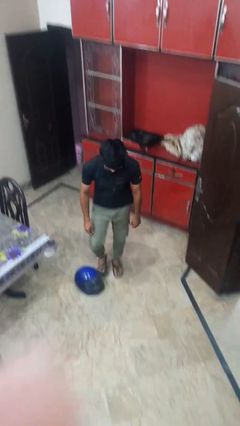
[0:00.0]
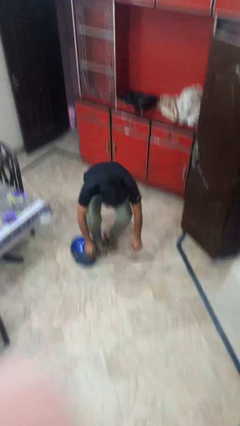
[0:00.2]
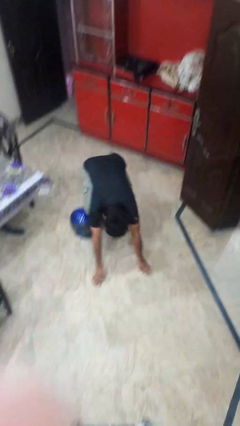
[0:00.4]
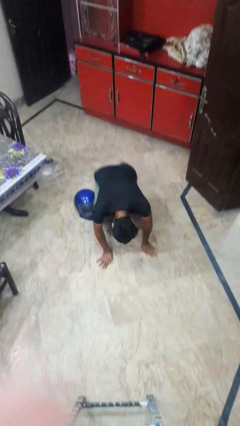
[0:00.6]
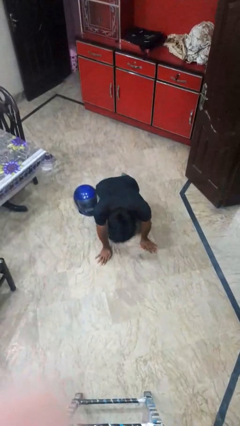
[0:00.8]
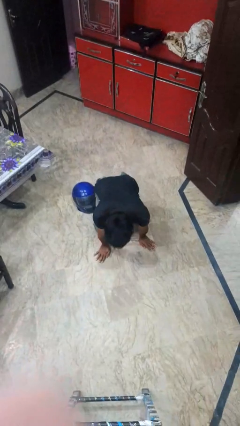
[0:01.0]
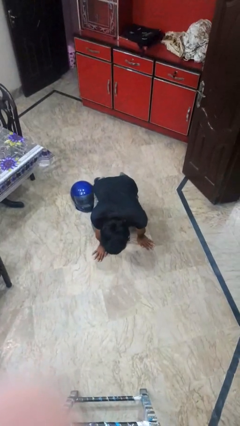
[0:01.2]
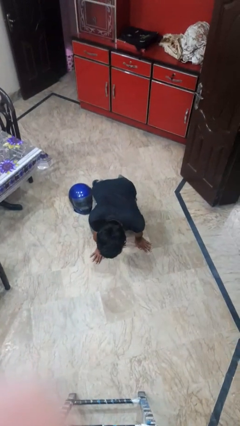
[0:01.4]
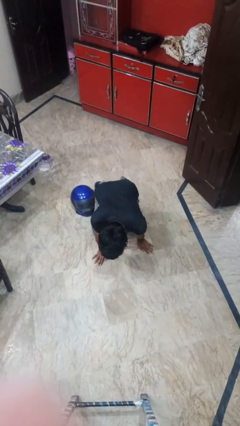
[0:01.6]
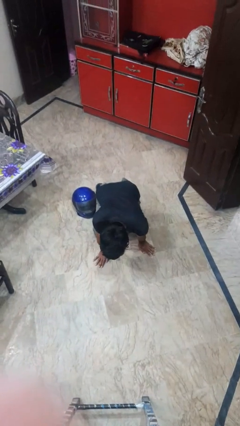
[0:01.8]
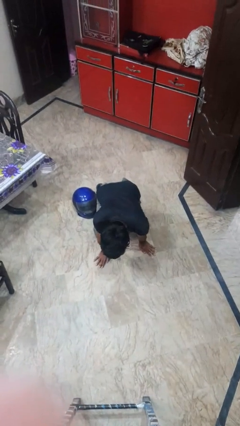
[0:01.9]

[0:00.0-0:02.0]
person trips on object on floor

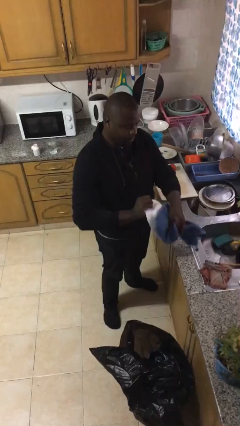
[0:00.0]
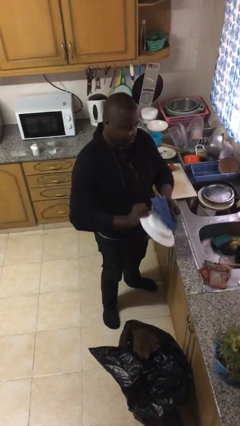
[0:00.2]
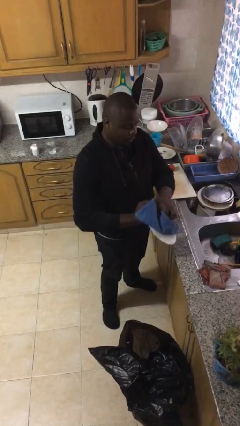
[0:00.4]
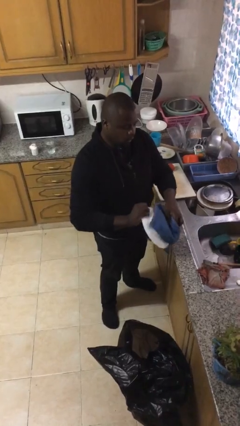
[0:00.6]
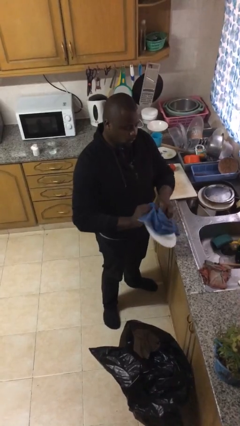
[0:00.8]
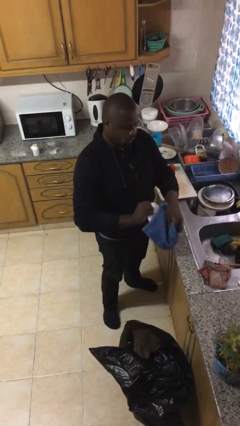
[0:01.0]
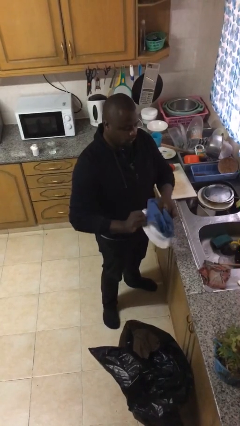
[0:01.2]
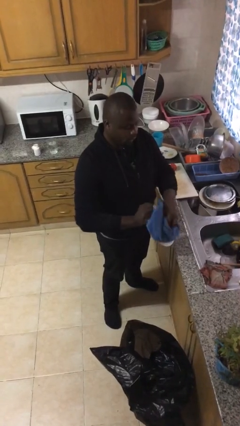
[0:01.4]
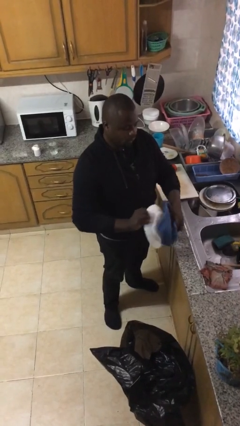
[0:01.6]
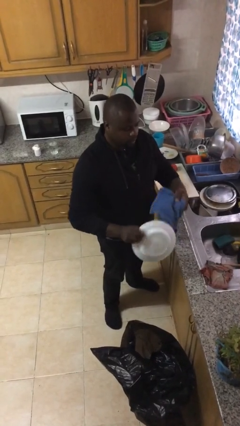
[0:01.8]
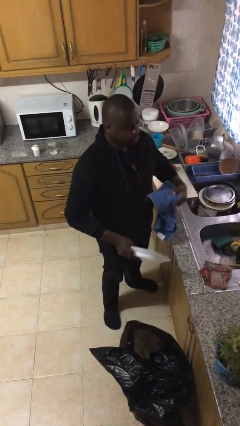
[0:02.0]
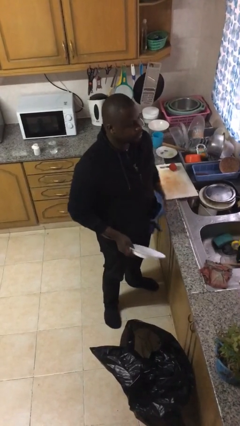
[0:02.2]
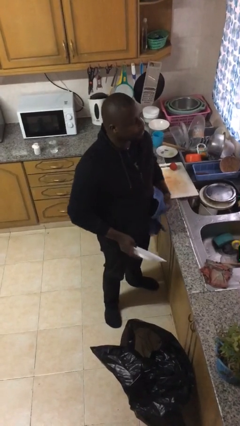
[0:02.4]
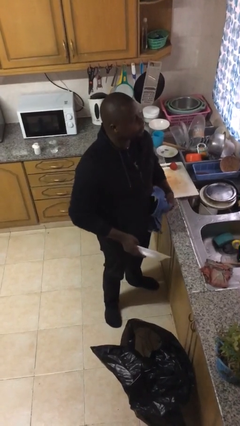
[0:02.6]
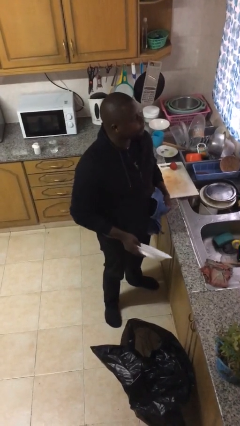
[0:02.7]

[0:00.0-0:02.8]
person dries dish

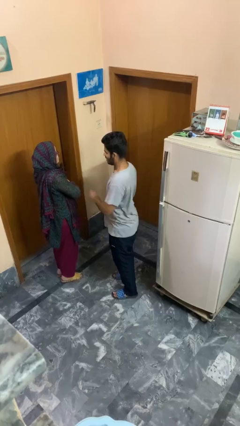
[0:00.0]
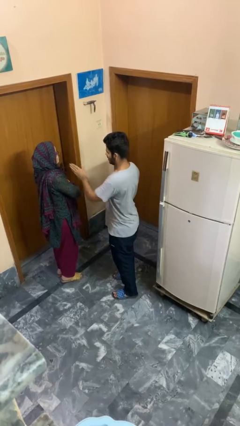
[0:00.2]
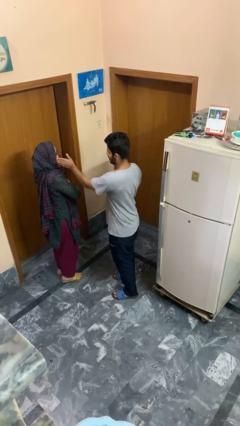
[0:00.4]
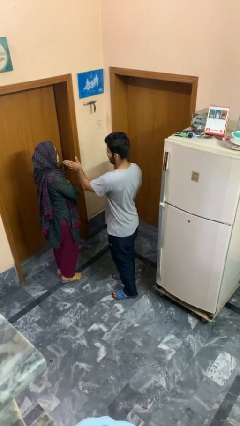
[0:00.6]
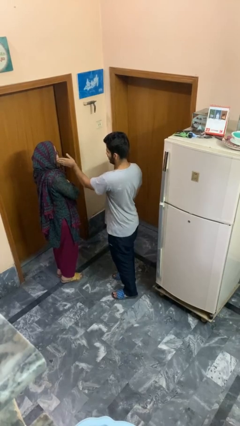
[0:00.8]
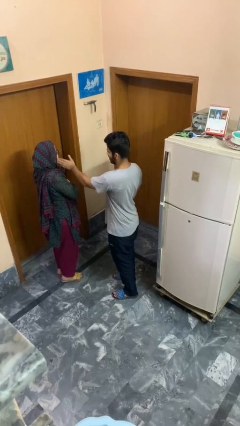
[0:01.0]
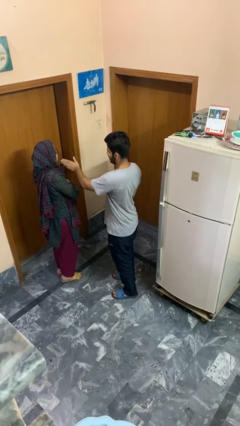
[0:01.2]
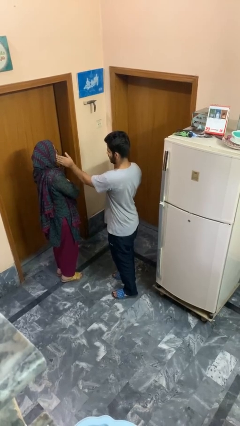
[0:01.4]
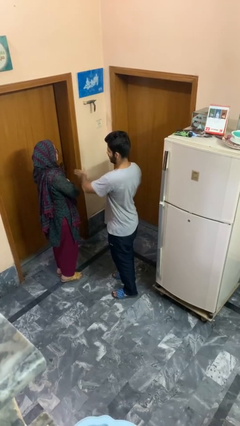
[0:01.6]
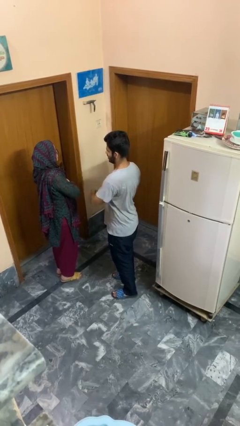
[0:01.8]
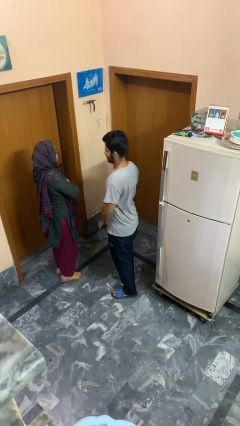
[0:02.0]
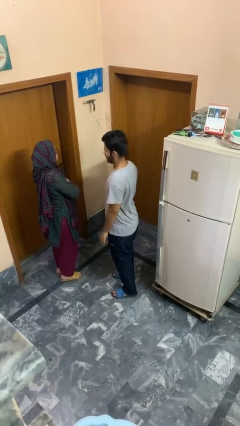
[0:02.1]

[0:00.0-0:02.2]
person touches face of person

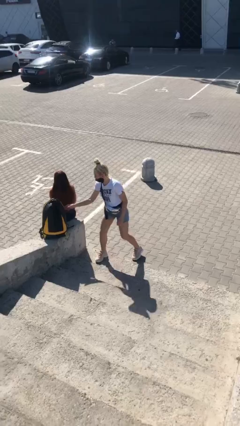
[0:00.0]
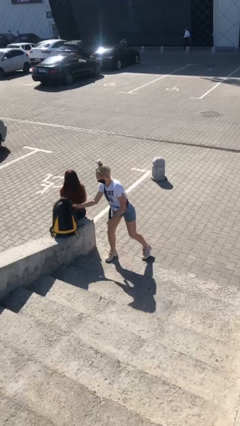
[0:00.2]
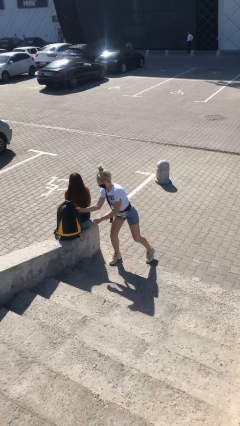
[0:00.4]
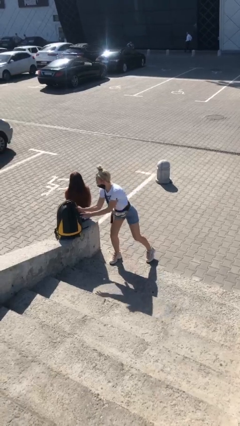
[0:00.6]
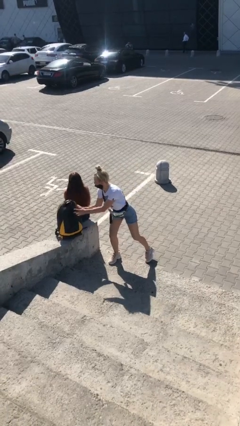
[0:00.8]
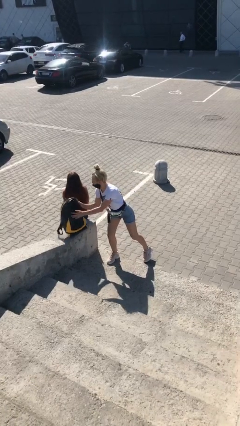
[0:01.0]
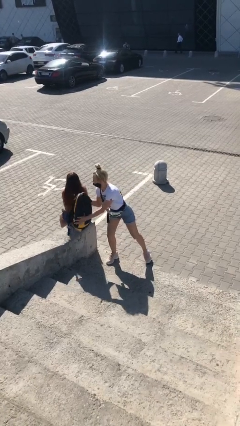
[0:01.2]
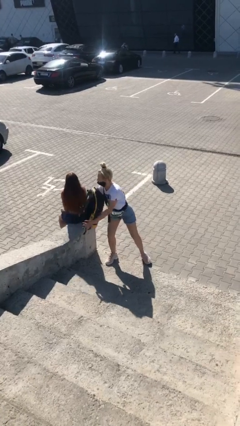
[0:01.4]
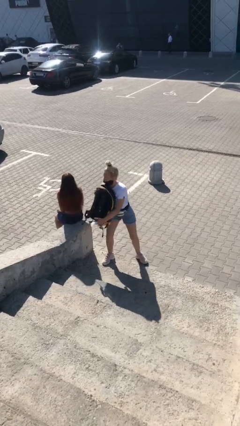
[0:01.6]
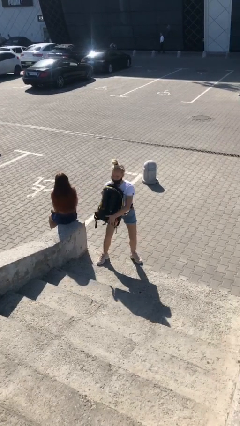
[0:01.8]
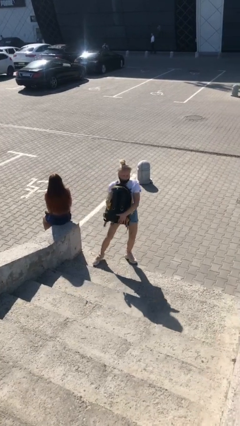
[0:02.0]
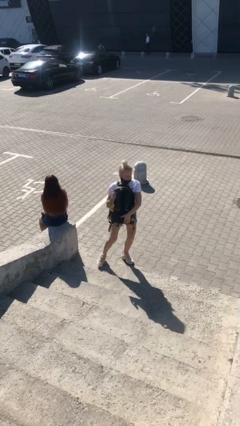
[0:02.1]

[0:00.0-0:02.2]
person steals object from person

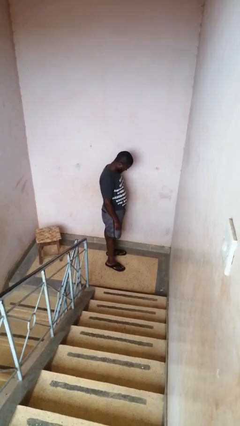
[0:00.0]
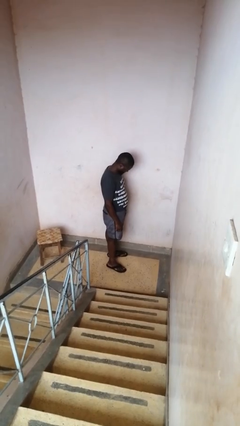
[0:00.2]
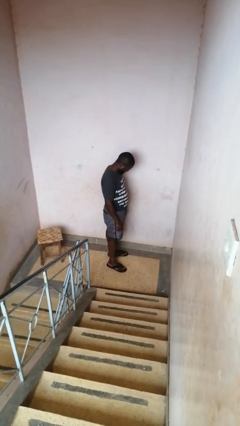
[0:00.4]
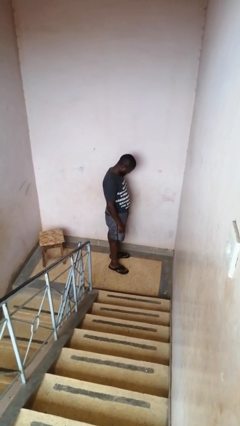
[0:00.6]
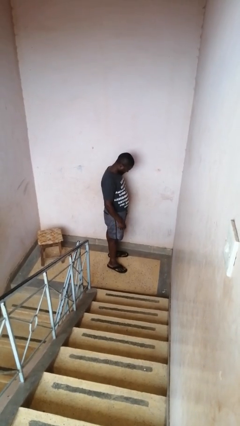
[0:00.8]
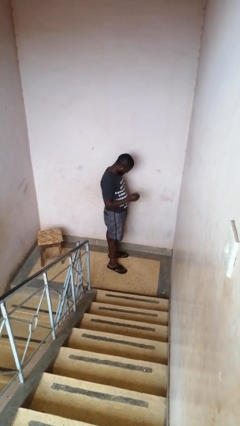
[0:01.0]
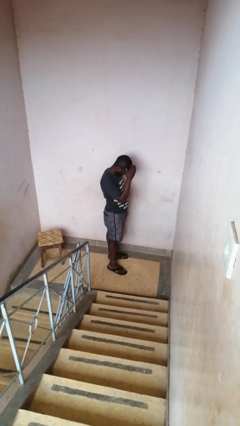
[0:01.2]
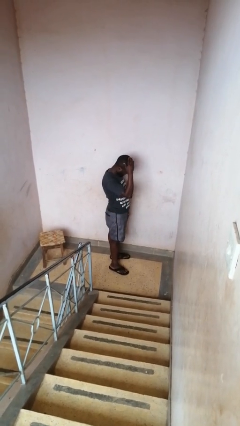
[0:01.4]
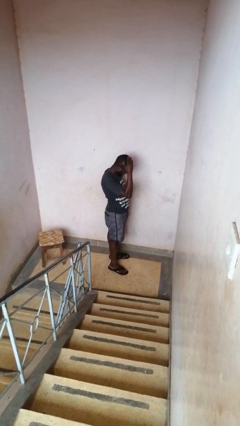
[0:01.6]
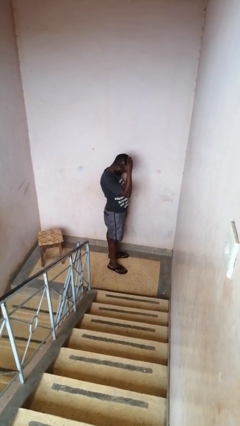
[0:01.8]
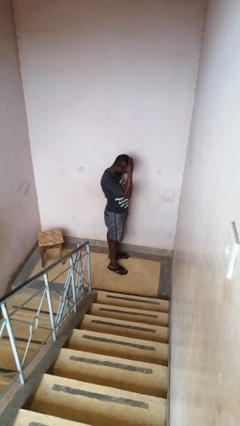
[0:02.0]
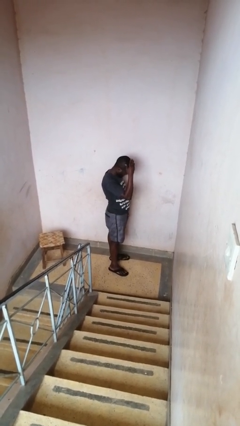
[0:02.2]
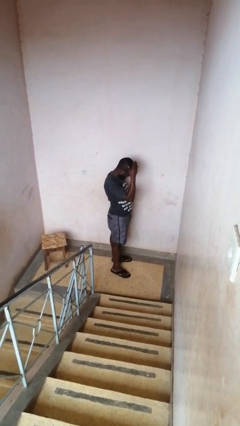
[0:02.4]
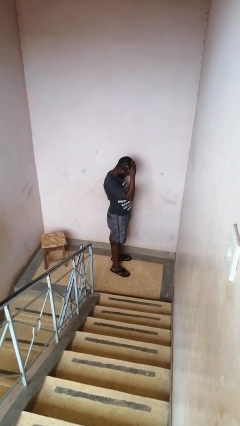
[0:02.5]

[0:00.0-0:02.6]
person pats head

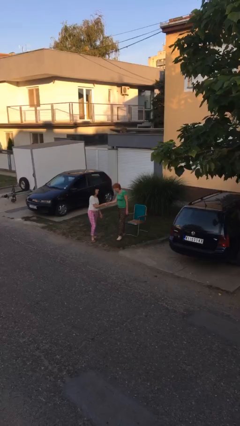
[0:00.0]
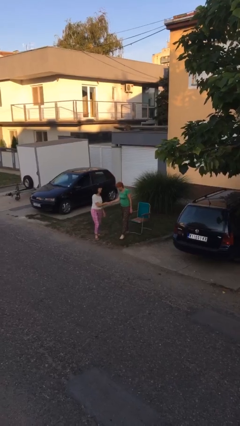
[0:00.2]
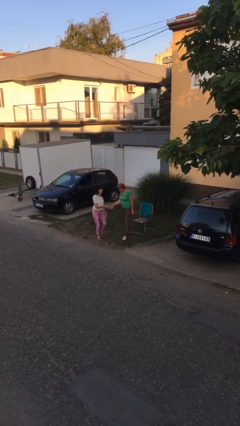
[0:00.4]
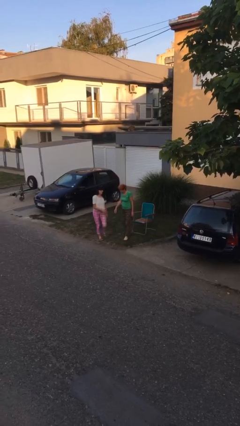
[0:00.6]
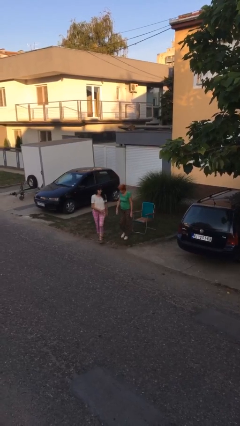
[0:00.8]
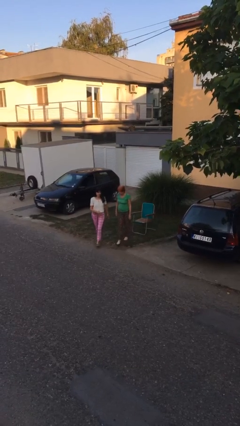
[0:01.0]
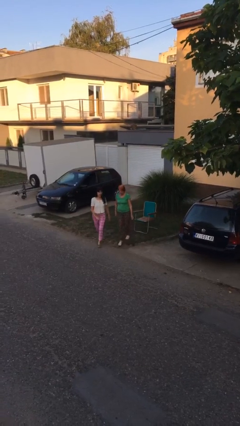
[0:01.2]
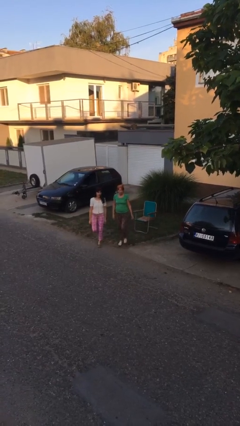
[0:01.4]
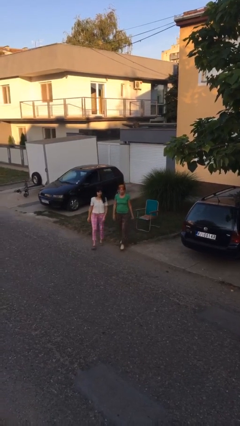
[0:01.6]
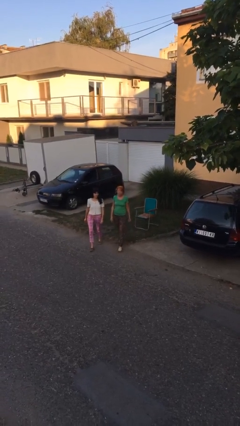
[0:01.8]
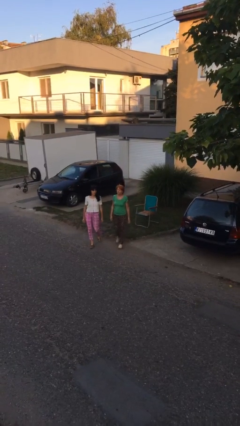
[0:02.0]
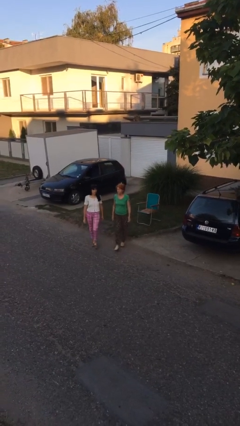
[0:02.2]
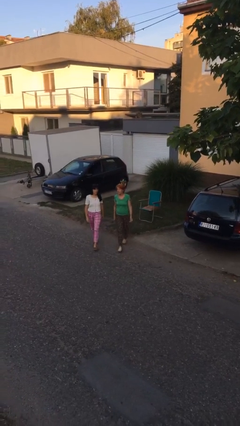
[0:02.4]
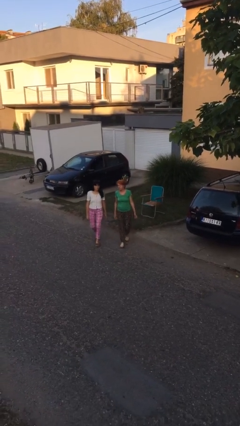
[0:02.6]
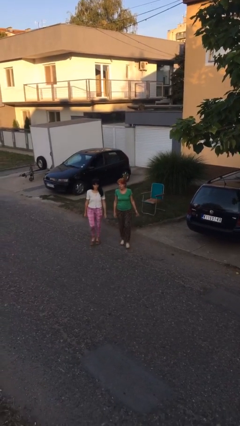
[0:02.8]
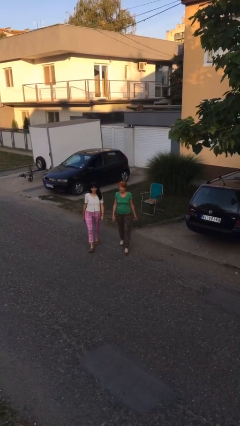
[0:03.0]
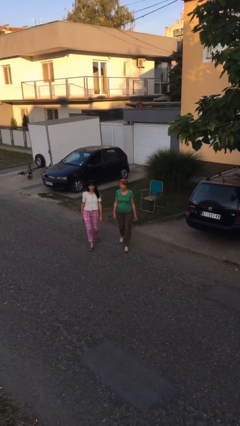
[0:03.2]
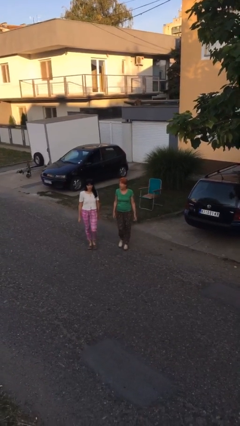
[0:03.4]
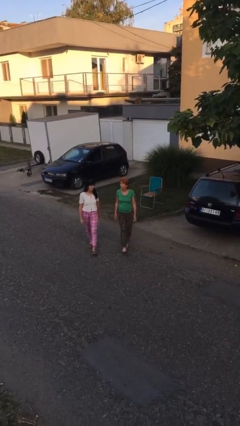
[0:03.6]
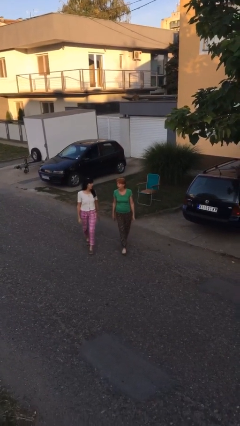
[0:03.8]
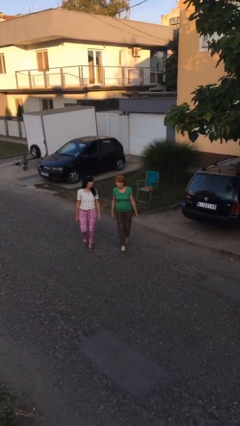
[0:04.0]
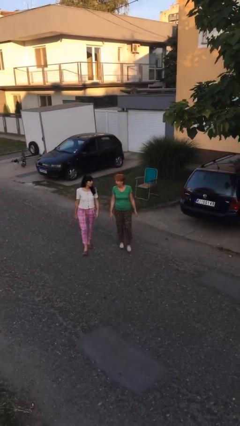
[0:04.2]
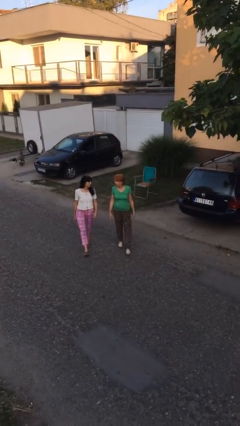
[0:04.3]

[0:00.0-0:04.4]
person talks to person

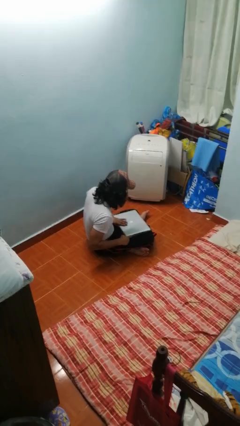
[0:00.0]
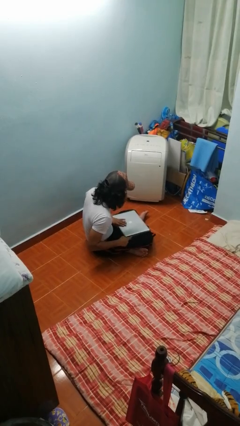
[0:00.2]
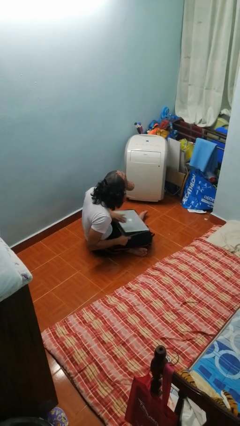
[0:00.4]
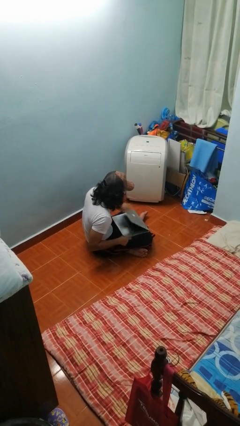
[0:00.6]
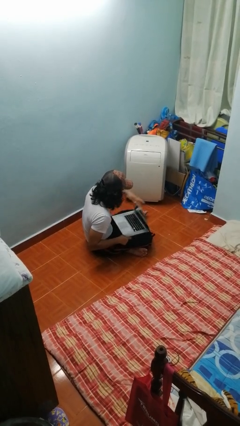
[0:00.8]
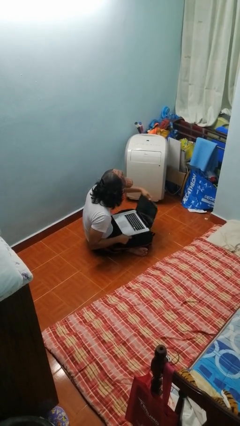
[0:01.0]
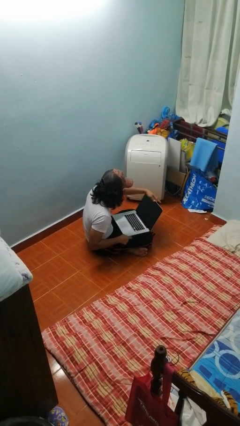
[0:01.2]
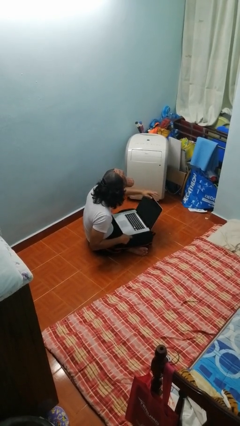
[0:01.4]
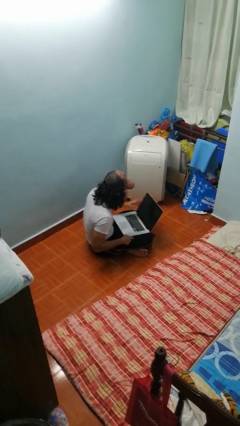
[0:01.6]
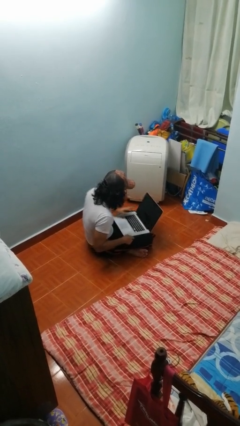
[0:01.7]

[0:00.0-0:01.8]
person opens laptop
